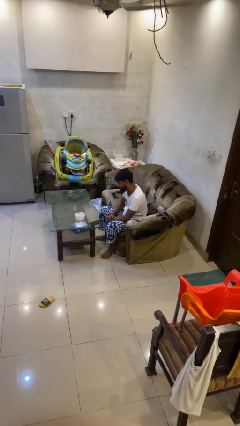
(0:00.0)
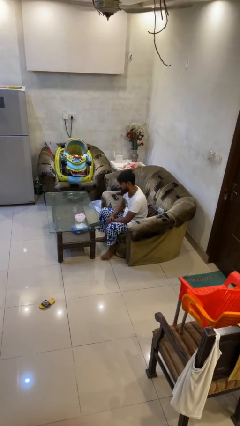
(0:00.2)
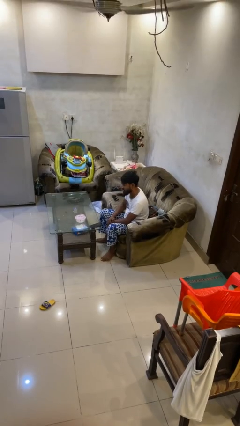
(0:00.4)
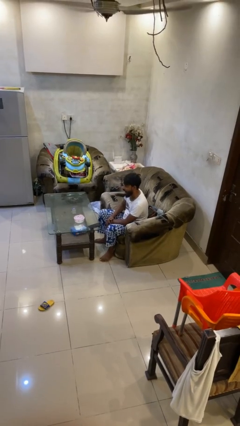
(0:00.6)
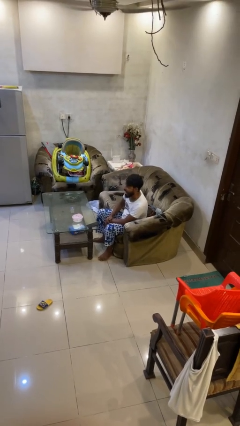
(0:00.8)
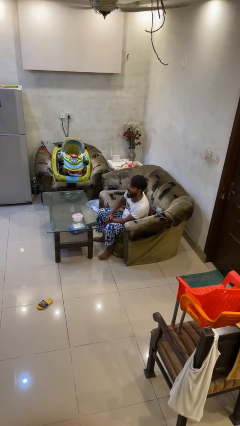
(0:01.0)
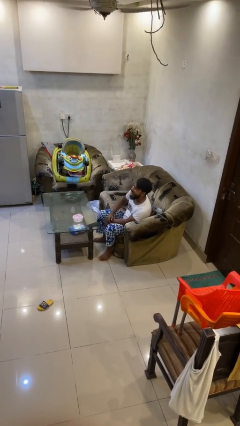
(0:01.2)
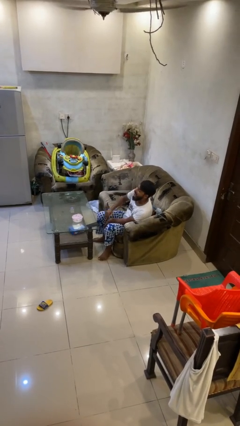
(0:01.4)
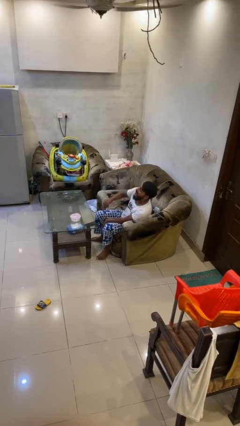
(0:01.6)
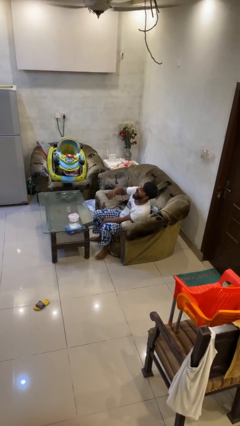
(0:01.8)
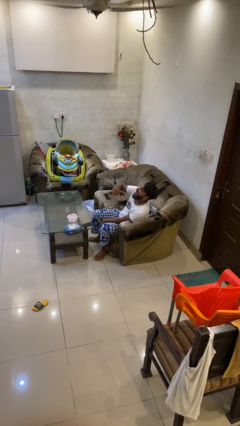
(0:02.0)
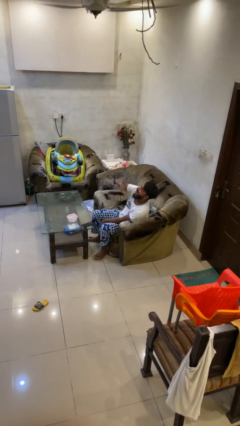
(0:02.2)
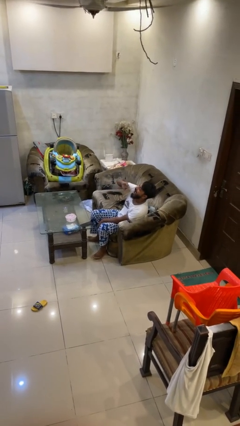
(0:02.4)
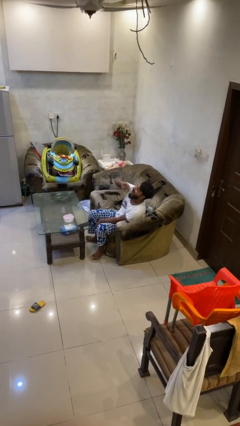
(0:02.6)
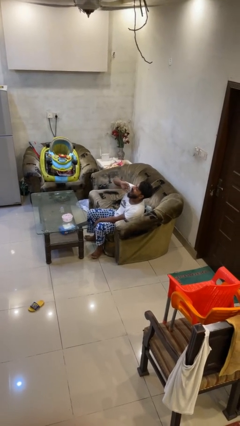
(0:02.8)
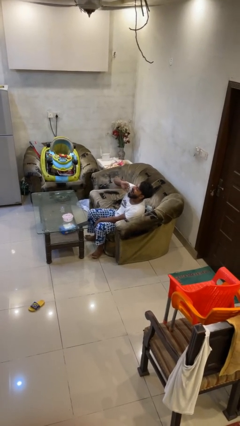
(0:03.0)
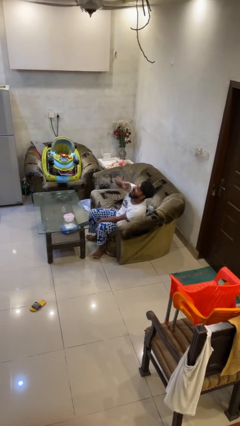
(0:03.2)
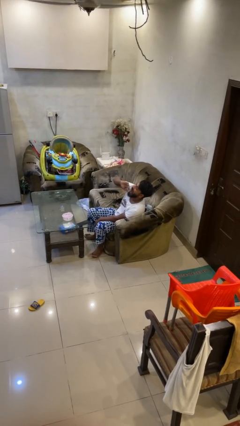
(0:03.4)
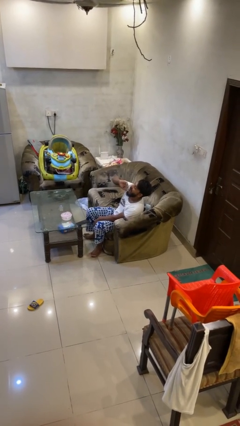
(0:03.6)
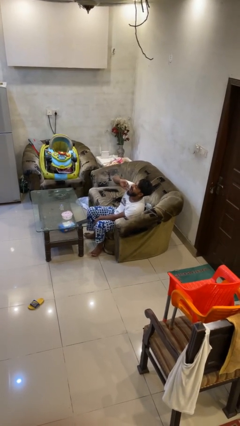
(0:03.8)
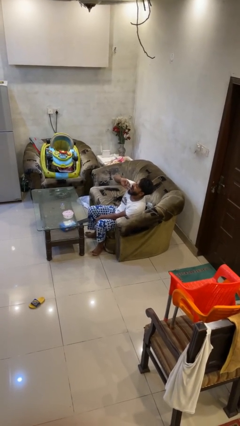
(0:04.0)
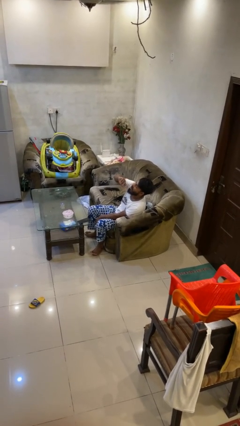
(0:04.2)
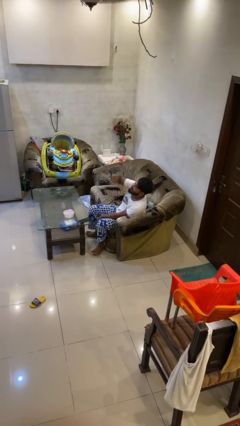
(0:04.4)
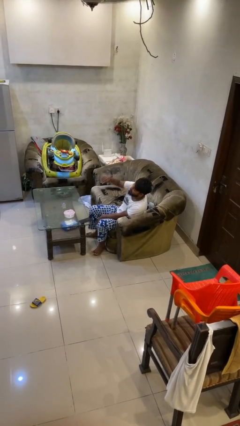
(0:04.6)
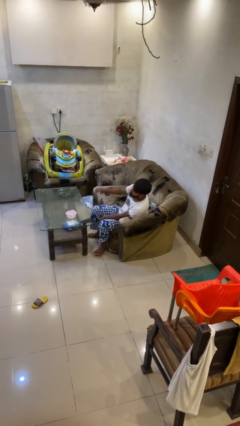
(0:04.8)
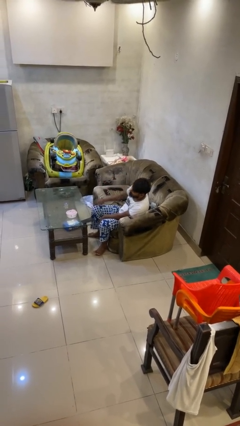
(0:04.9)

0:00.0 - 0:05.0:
person yawns

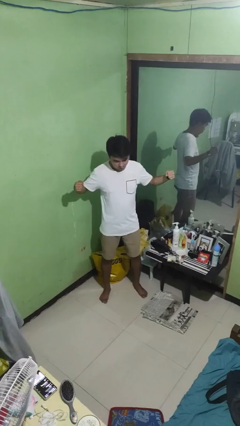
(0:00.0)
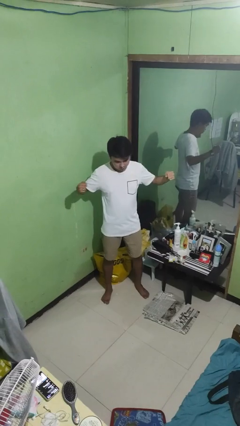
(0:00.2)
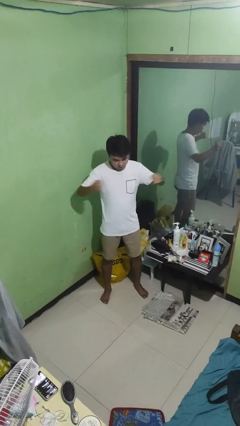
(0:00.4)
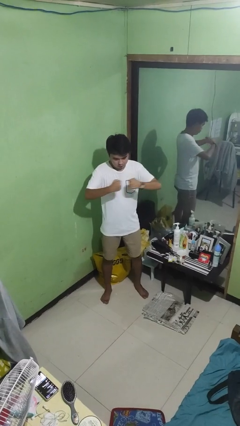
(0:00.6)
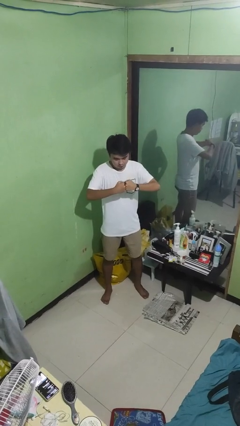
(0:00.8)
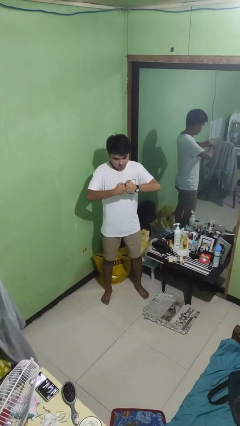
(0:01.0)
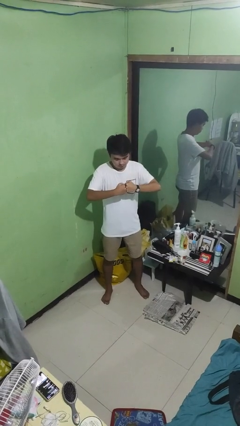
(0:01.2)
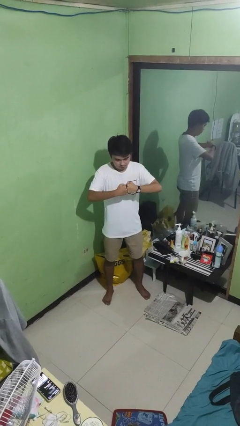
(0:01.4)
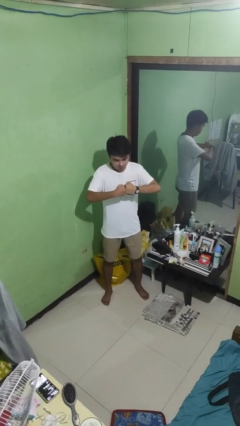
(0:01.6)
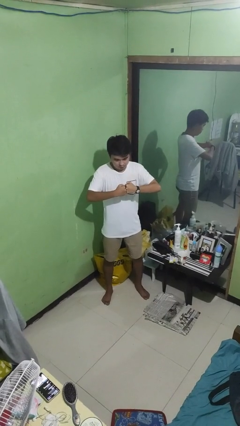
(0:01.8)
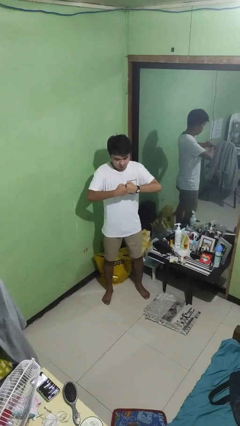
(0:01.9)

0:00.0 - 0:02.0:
person gestures zoom out

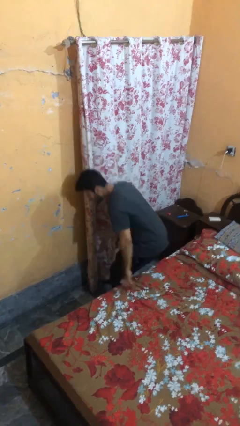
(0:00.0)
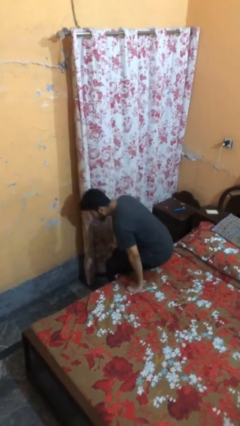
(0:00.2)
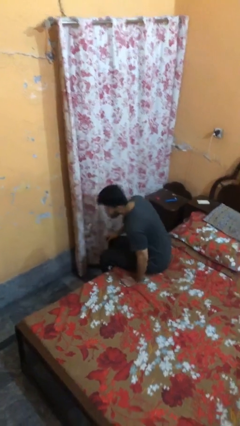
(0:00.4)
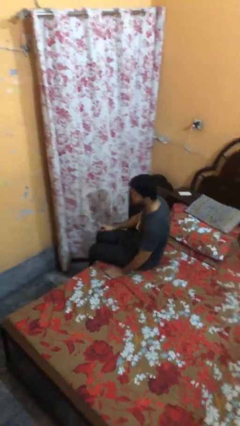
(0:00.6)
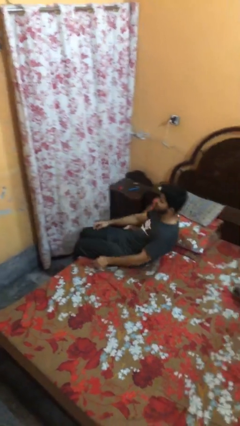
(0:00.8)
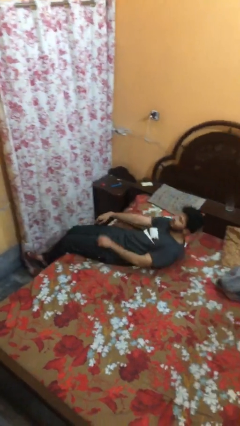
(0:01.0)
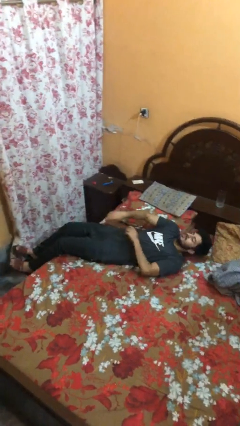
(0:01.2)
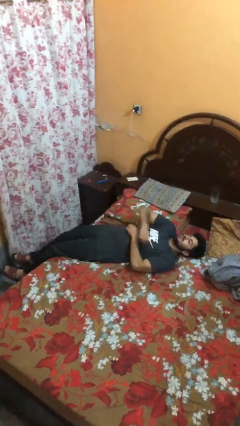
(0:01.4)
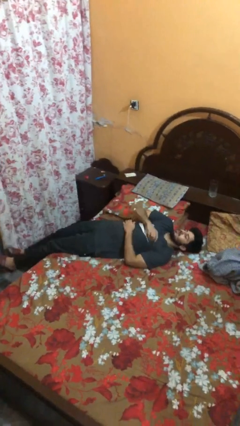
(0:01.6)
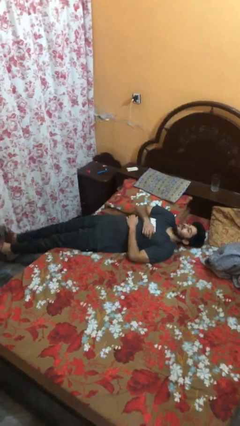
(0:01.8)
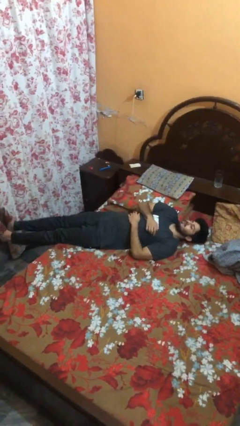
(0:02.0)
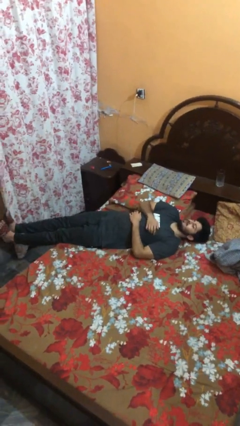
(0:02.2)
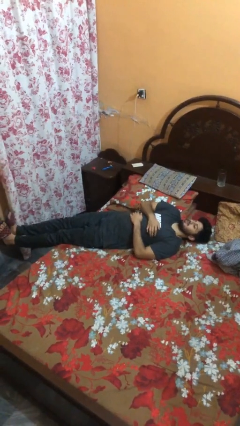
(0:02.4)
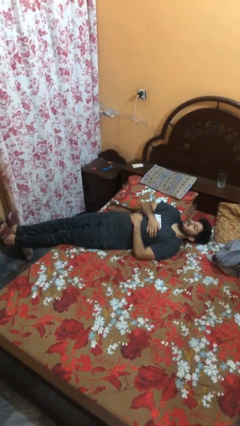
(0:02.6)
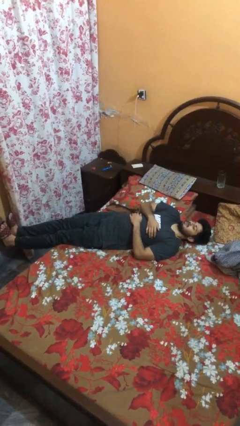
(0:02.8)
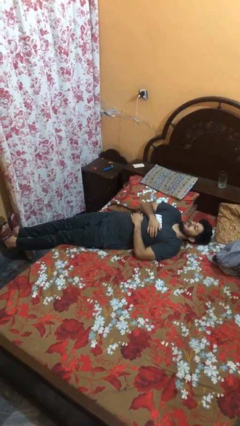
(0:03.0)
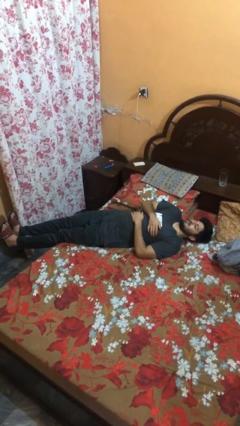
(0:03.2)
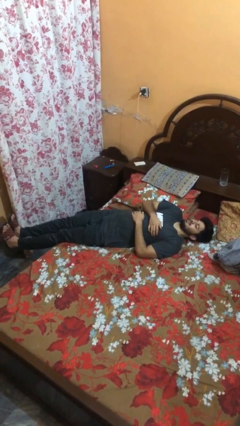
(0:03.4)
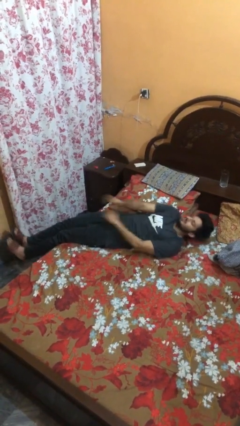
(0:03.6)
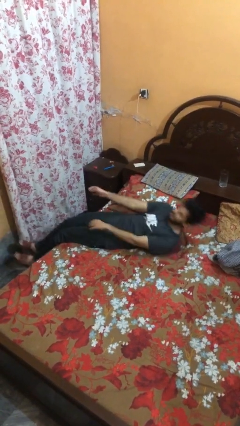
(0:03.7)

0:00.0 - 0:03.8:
person lies down on bed

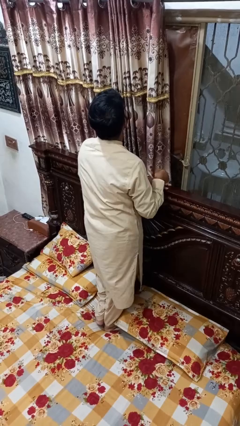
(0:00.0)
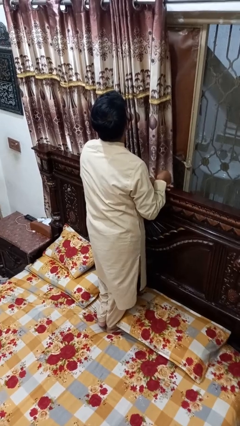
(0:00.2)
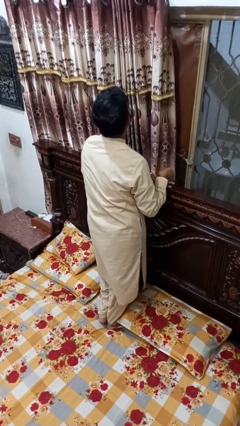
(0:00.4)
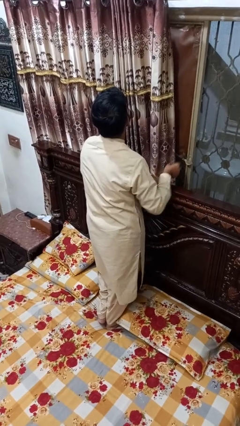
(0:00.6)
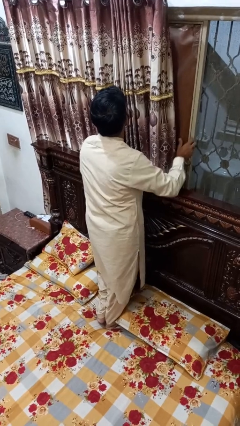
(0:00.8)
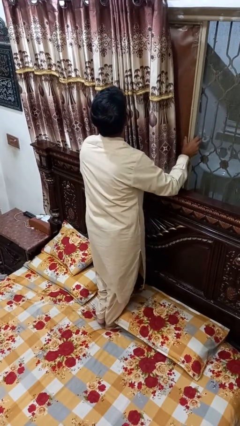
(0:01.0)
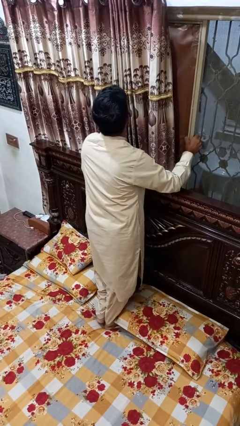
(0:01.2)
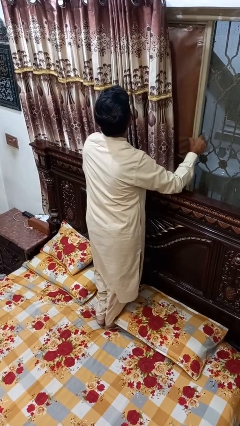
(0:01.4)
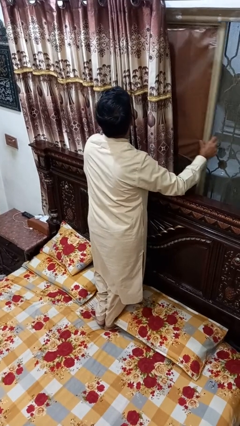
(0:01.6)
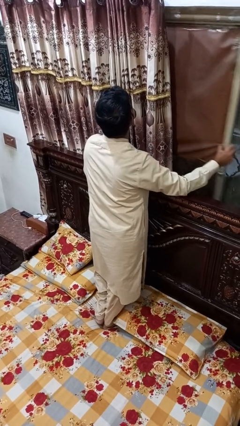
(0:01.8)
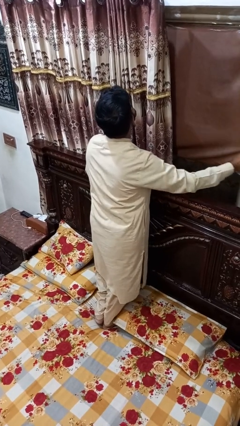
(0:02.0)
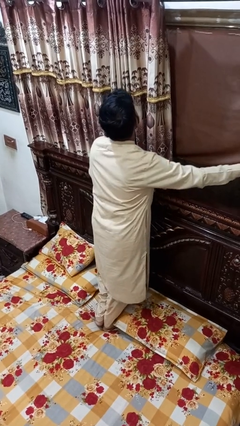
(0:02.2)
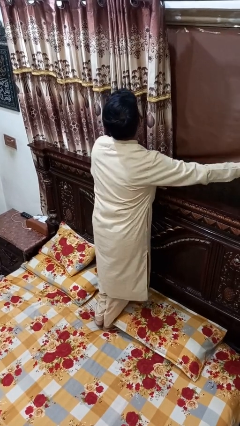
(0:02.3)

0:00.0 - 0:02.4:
person closes home window

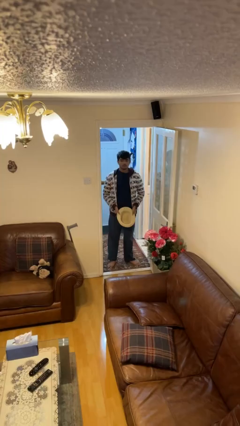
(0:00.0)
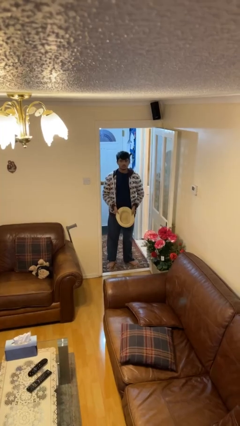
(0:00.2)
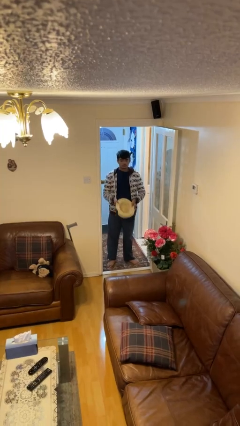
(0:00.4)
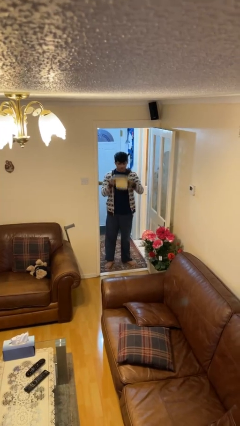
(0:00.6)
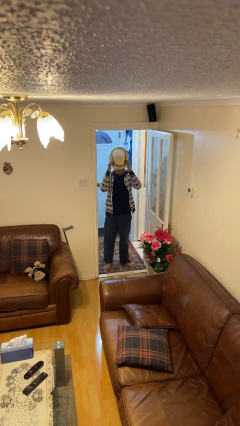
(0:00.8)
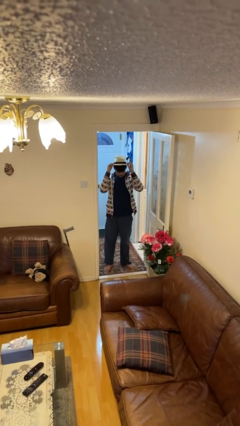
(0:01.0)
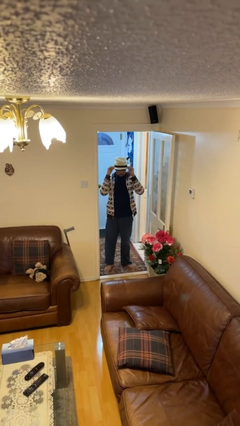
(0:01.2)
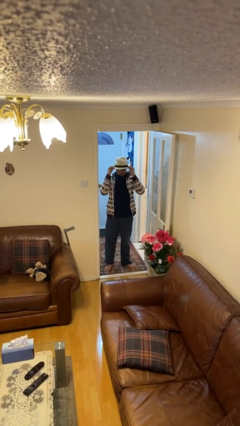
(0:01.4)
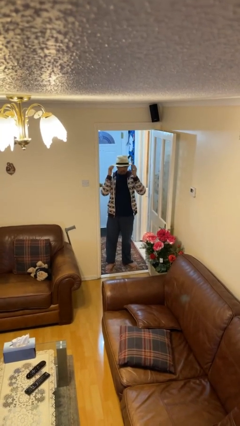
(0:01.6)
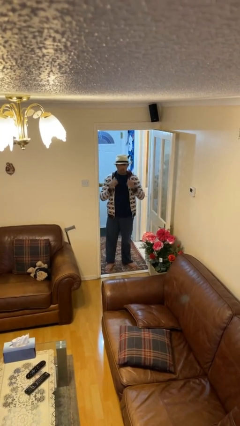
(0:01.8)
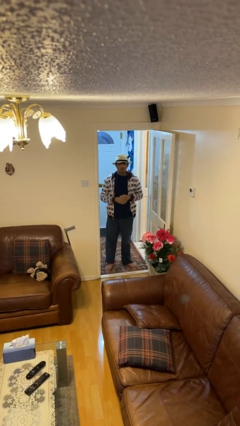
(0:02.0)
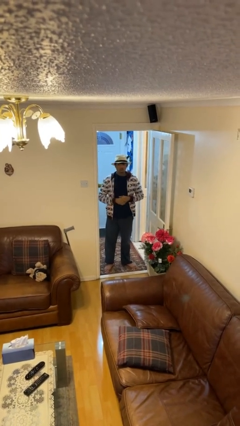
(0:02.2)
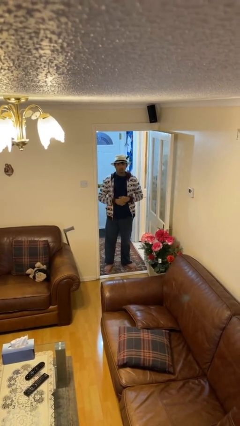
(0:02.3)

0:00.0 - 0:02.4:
person puts on hat

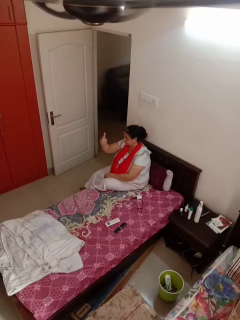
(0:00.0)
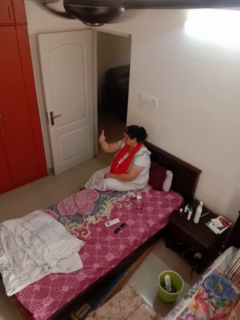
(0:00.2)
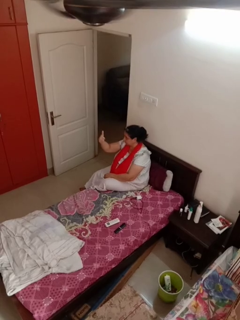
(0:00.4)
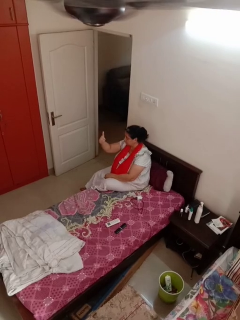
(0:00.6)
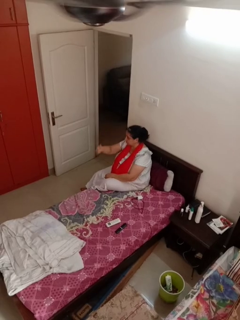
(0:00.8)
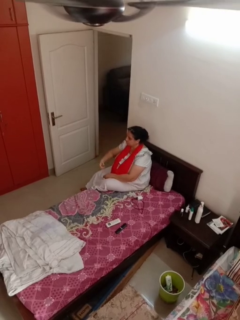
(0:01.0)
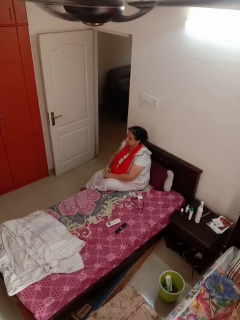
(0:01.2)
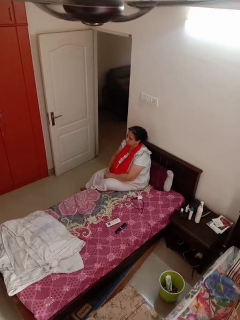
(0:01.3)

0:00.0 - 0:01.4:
person gestures thumbs up

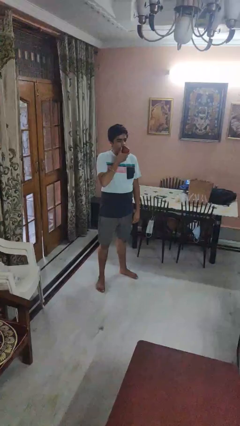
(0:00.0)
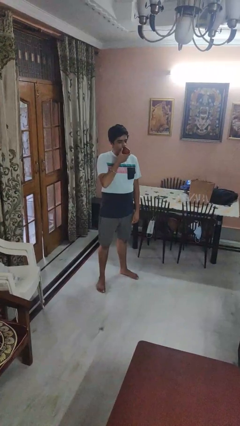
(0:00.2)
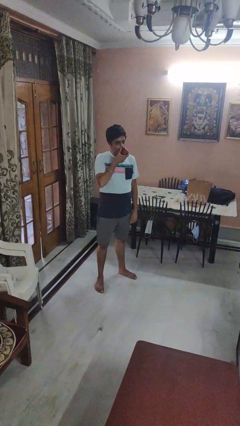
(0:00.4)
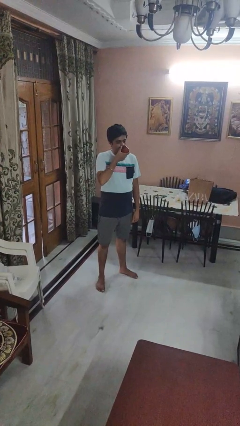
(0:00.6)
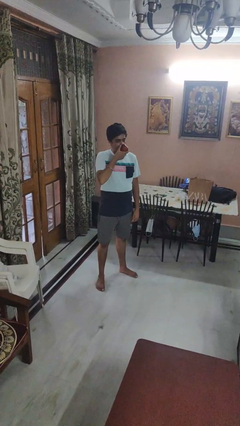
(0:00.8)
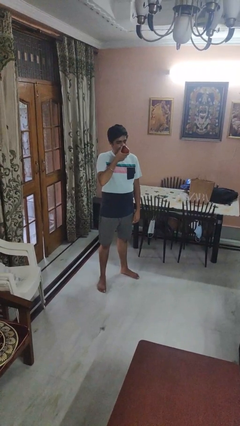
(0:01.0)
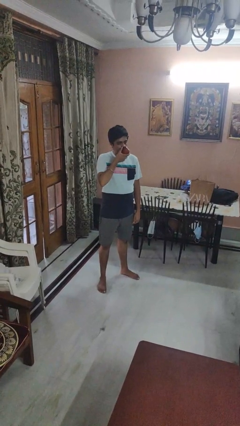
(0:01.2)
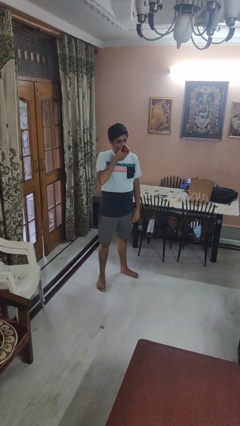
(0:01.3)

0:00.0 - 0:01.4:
person eats apple
